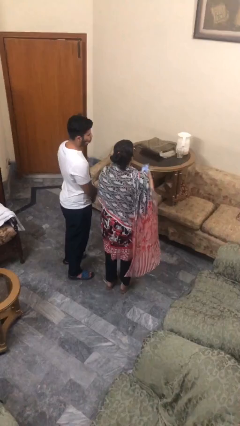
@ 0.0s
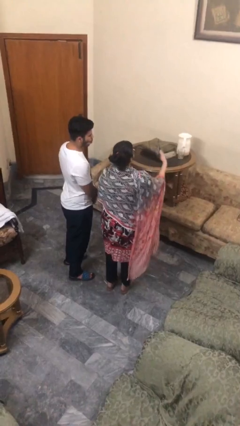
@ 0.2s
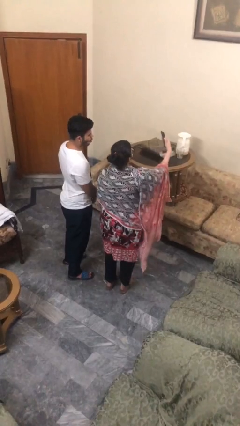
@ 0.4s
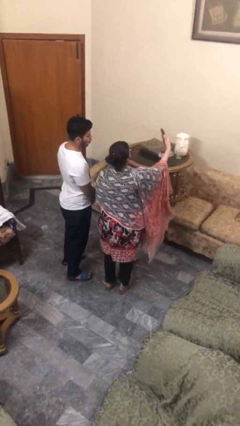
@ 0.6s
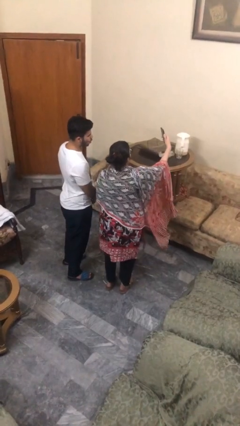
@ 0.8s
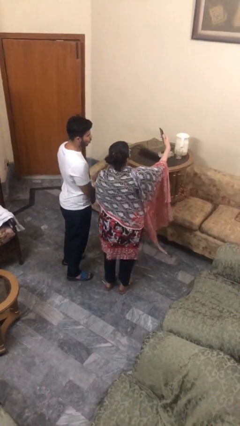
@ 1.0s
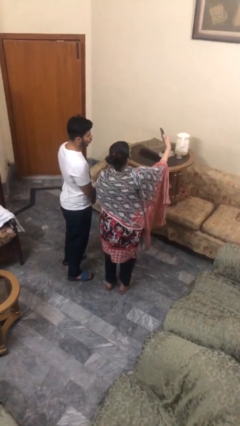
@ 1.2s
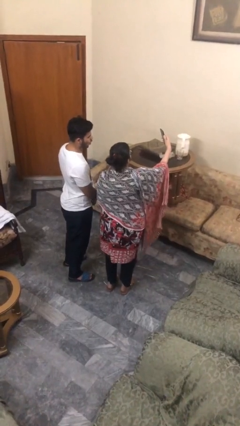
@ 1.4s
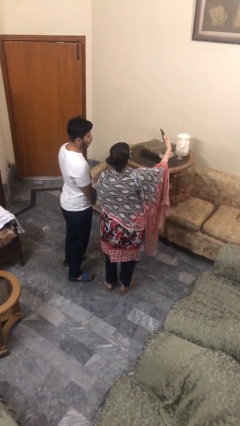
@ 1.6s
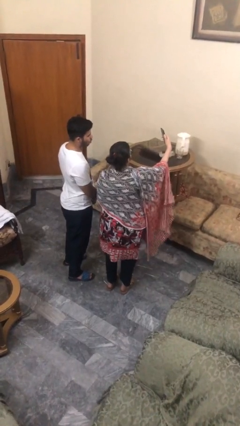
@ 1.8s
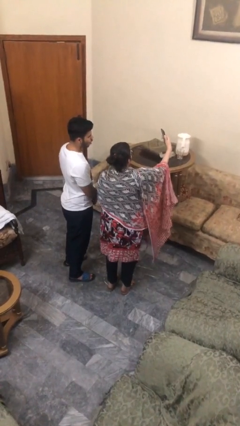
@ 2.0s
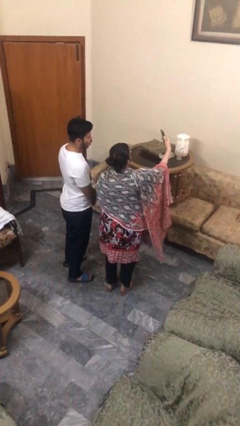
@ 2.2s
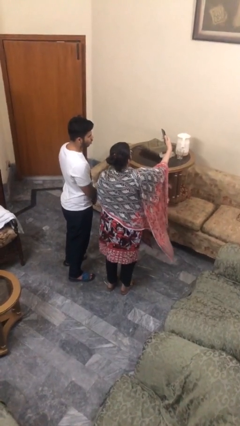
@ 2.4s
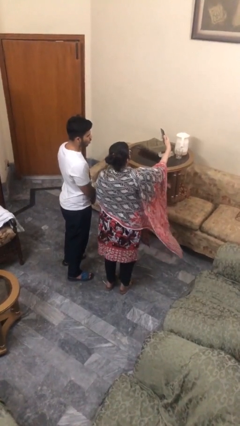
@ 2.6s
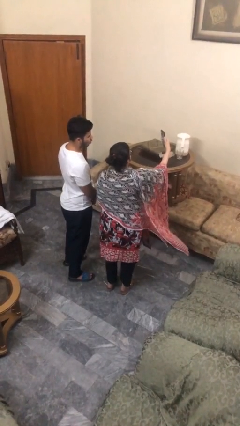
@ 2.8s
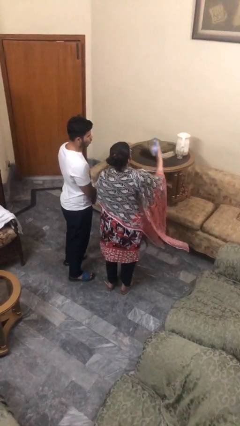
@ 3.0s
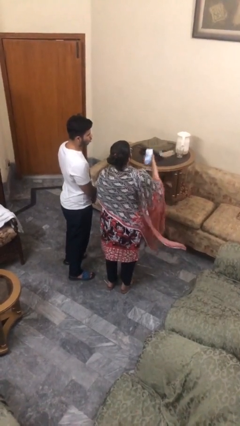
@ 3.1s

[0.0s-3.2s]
person takes selfie with person

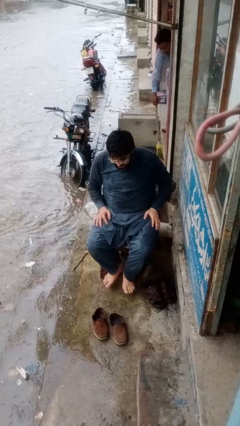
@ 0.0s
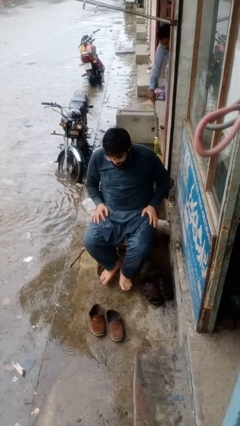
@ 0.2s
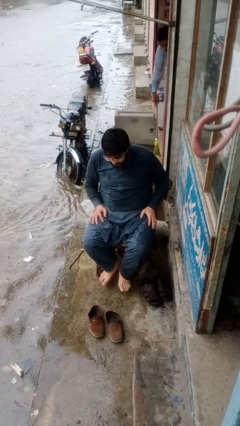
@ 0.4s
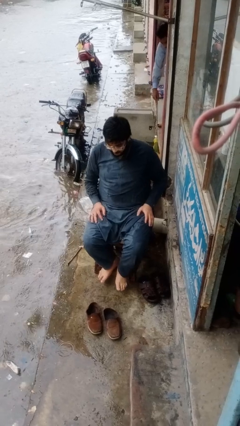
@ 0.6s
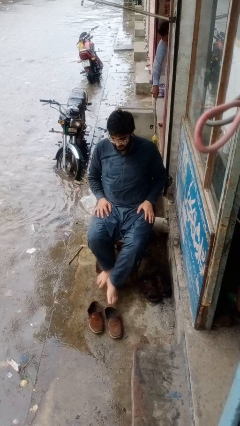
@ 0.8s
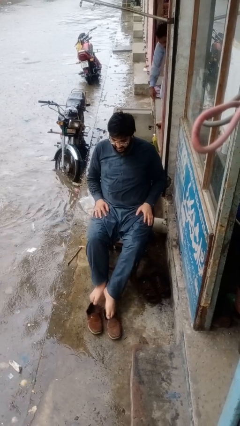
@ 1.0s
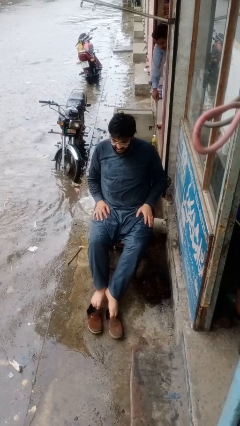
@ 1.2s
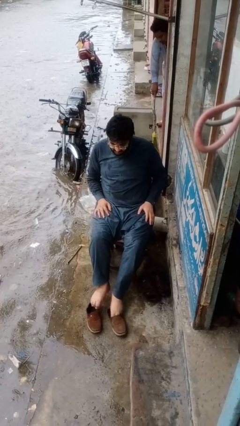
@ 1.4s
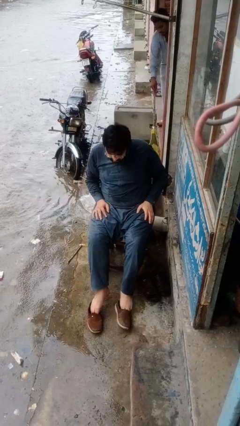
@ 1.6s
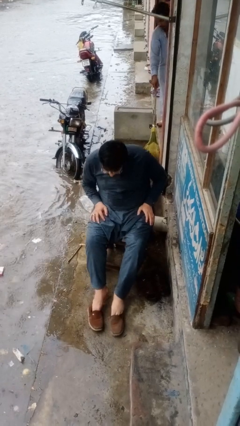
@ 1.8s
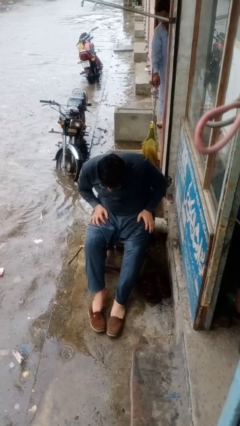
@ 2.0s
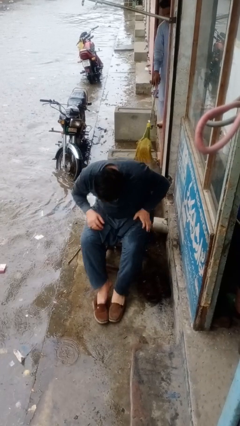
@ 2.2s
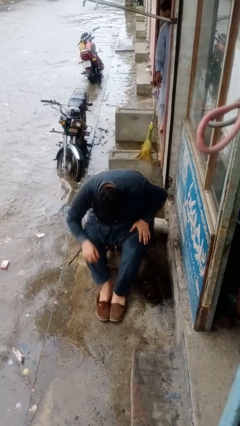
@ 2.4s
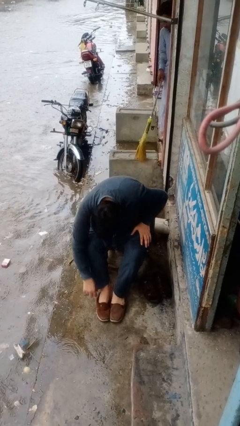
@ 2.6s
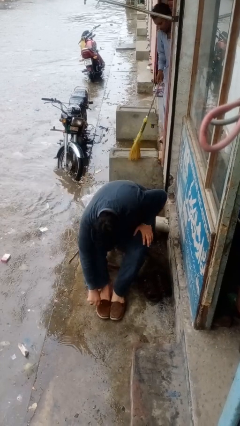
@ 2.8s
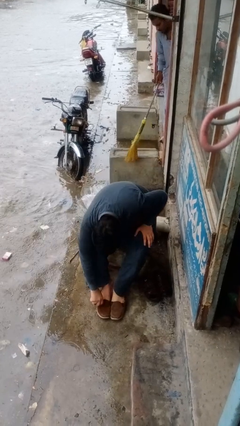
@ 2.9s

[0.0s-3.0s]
person puts on shoes

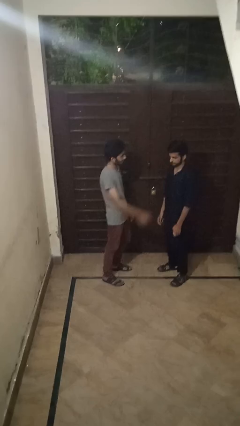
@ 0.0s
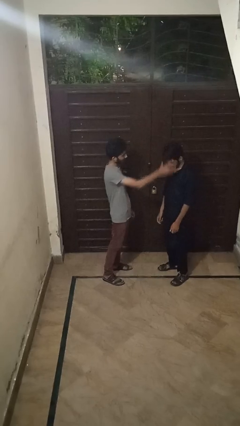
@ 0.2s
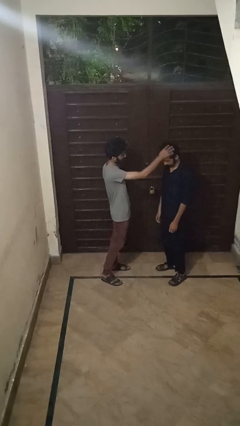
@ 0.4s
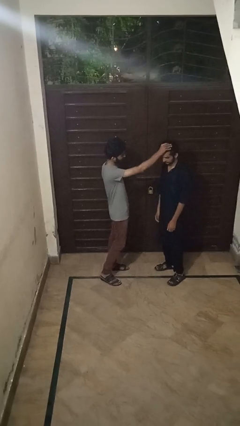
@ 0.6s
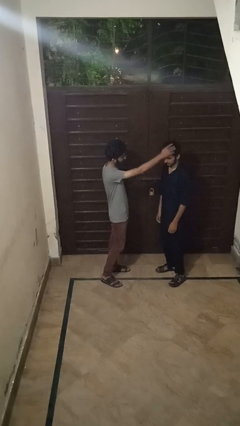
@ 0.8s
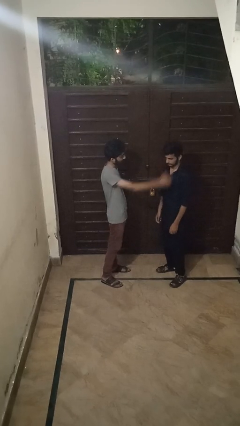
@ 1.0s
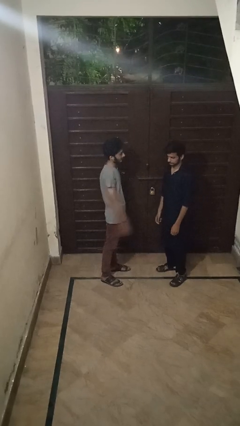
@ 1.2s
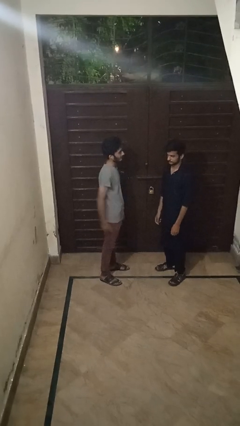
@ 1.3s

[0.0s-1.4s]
person grabs person by hair

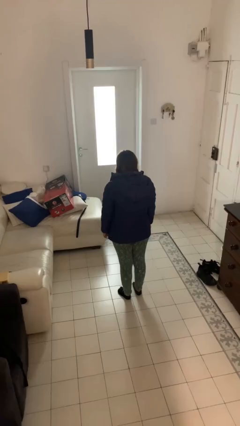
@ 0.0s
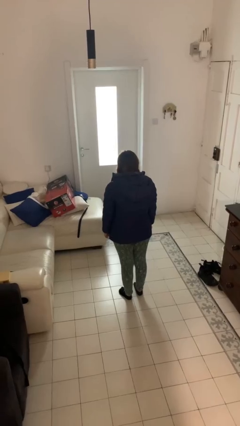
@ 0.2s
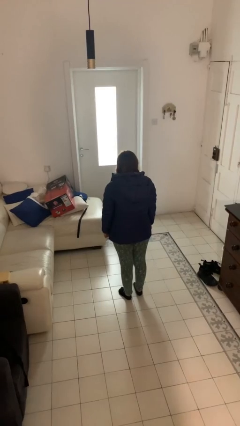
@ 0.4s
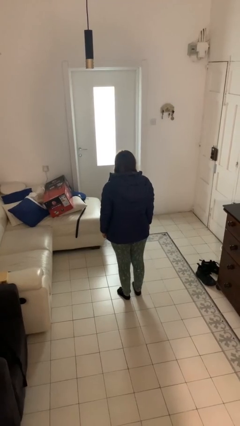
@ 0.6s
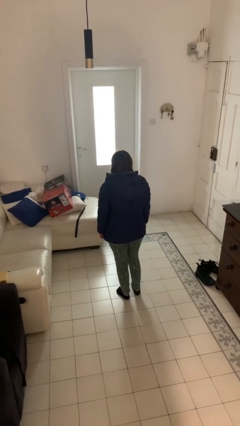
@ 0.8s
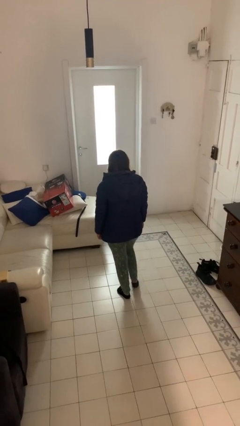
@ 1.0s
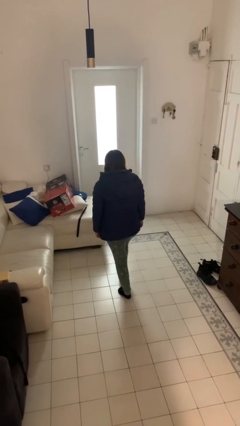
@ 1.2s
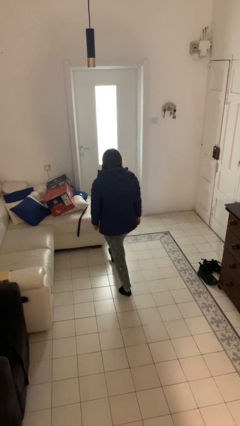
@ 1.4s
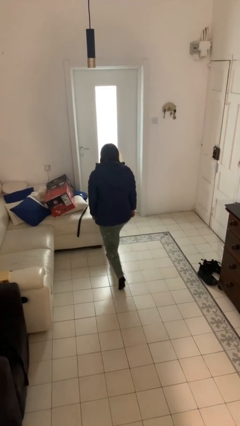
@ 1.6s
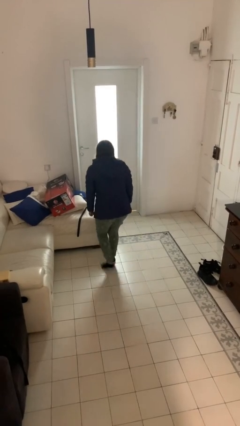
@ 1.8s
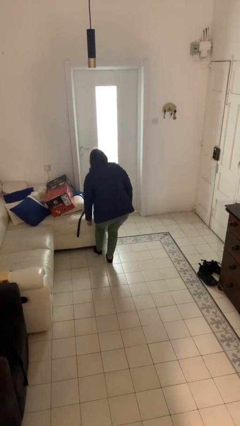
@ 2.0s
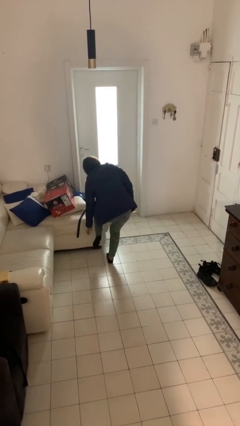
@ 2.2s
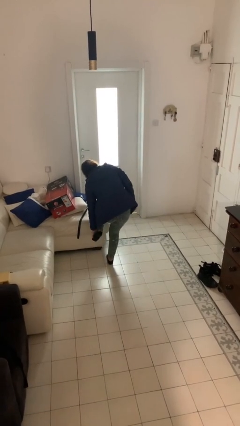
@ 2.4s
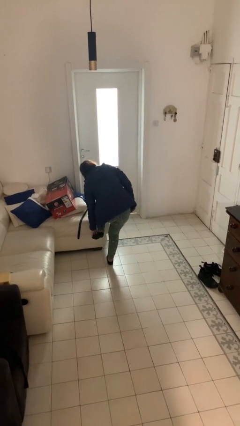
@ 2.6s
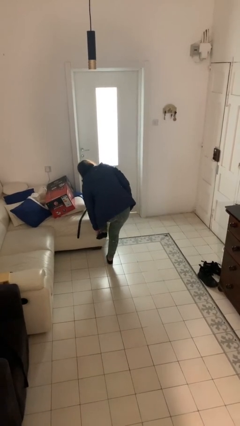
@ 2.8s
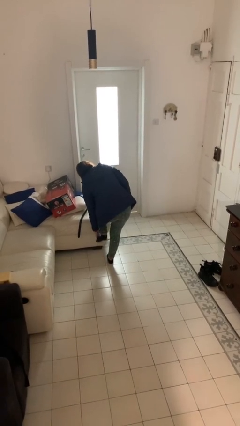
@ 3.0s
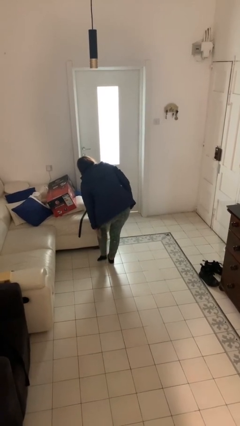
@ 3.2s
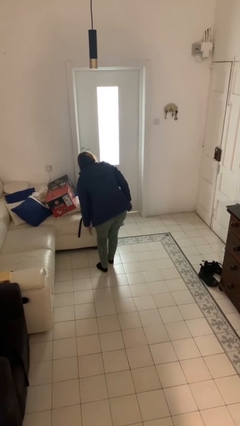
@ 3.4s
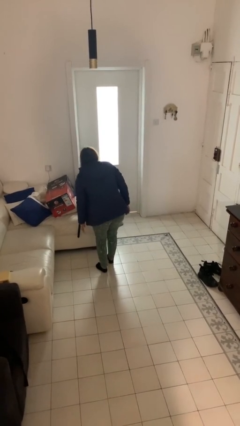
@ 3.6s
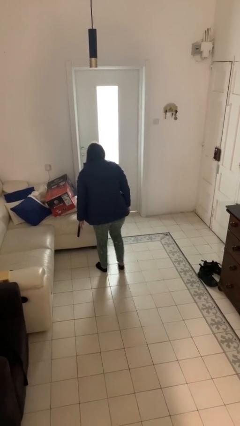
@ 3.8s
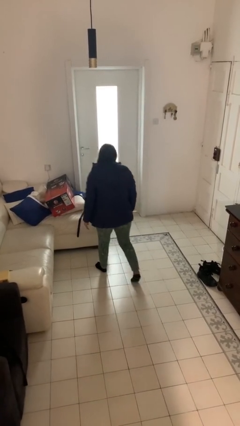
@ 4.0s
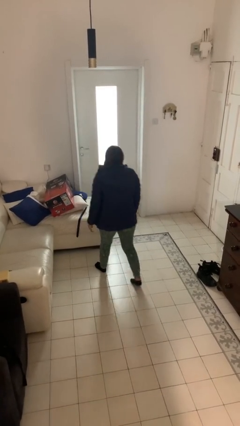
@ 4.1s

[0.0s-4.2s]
person stubs toe

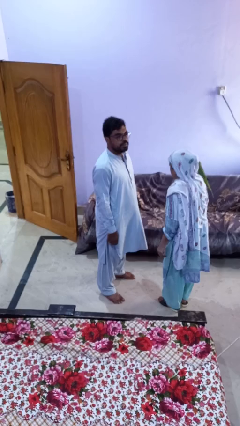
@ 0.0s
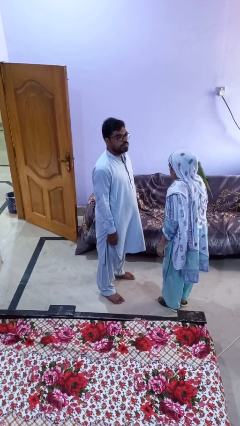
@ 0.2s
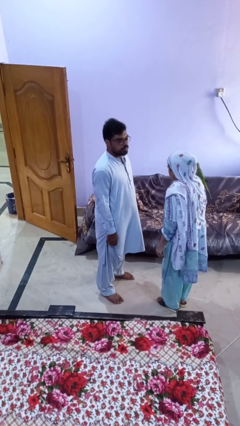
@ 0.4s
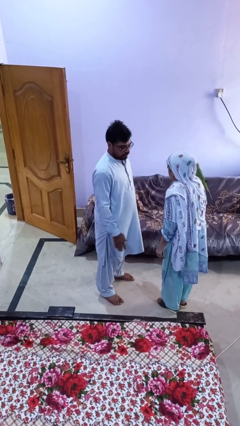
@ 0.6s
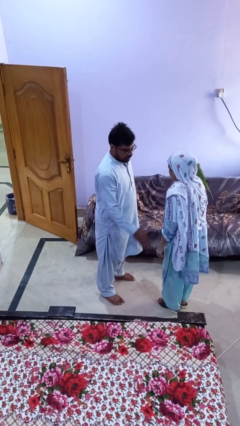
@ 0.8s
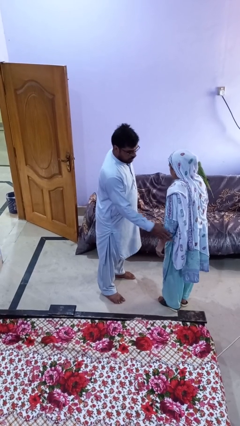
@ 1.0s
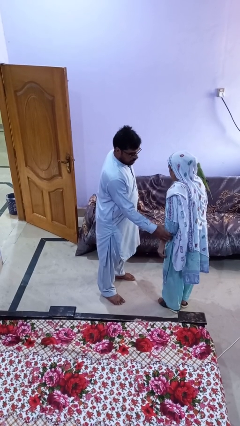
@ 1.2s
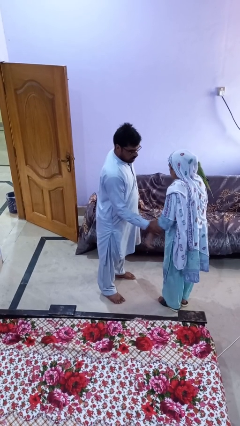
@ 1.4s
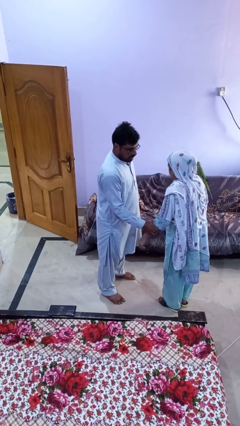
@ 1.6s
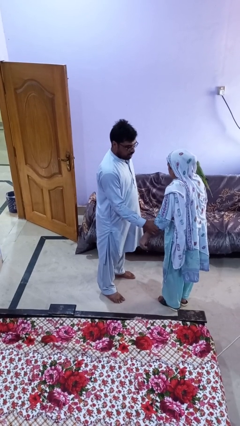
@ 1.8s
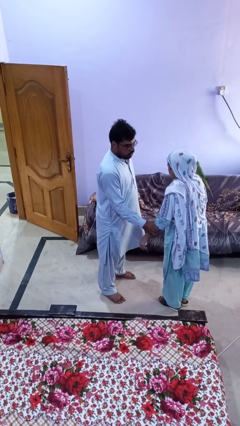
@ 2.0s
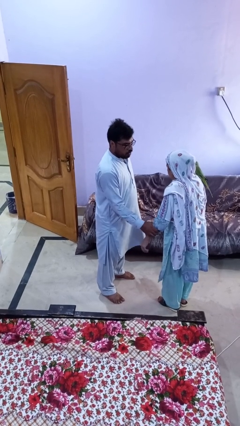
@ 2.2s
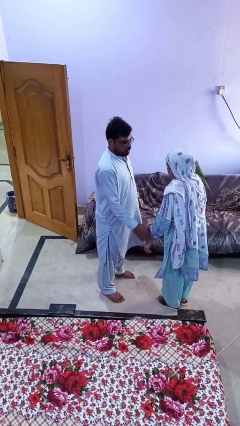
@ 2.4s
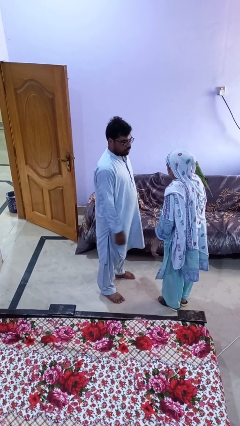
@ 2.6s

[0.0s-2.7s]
person grabs person by forearm

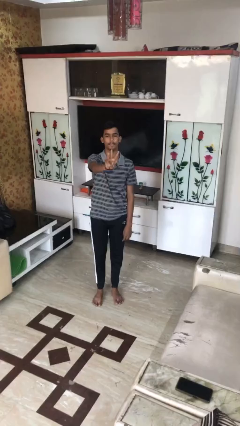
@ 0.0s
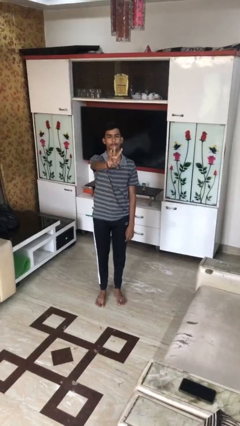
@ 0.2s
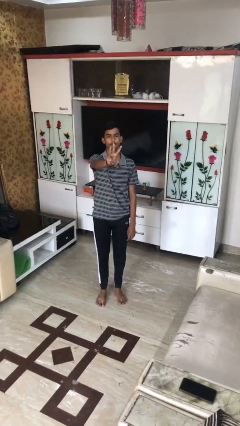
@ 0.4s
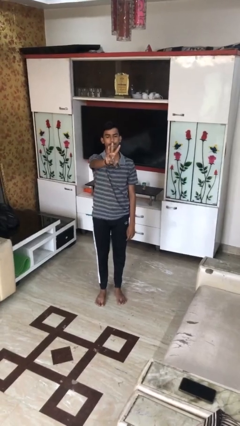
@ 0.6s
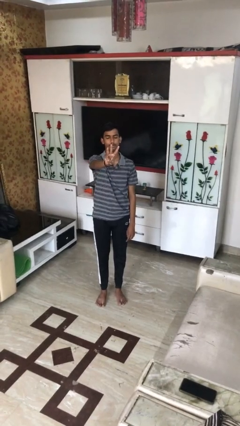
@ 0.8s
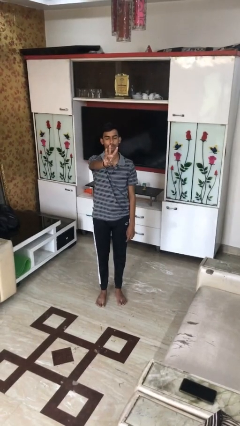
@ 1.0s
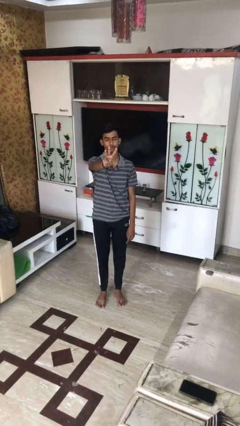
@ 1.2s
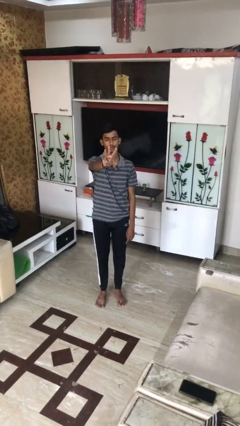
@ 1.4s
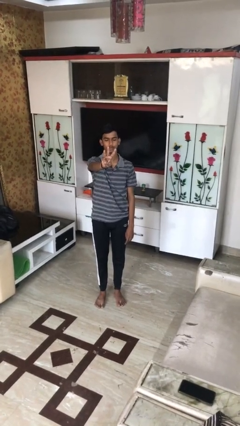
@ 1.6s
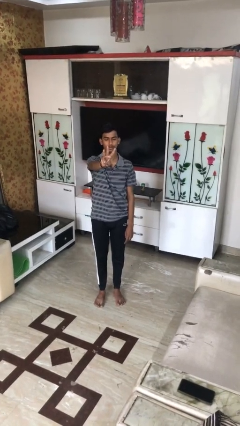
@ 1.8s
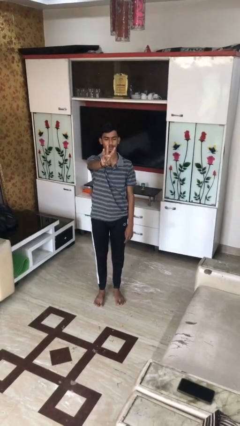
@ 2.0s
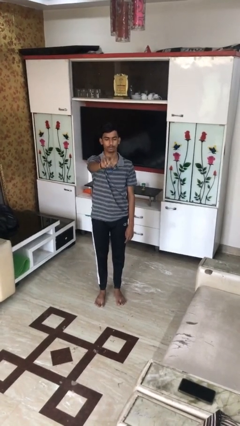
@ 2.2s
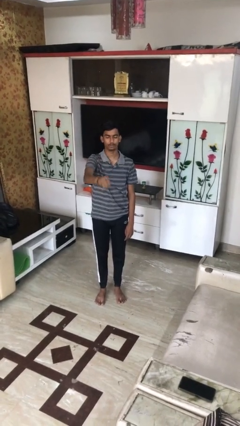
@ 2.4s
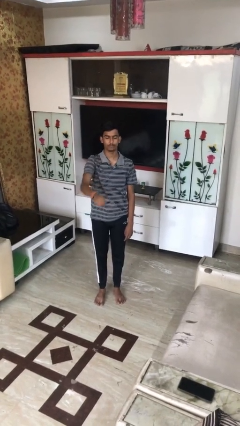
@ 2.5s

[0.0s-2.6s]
person gestures number three

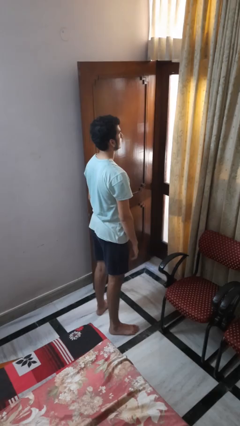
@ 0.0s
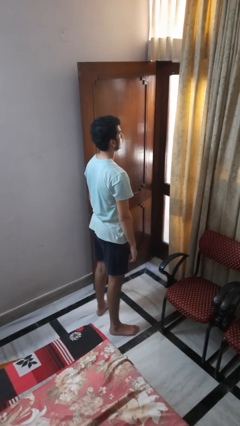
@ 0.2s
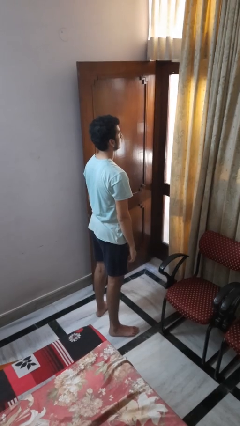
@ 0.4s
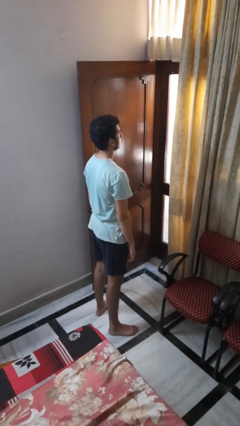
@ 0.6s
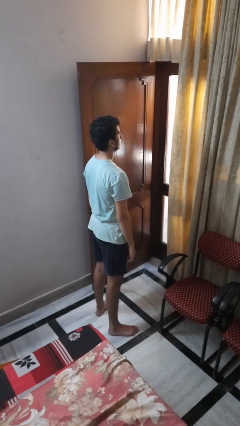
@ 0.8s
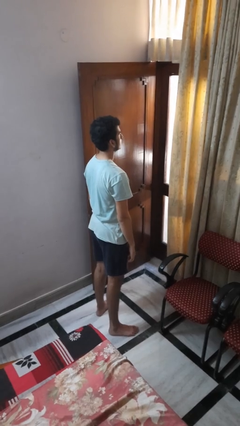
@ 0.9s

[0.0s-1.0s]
person takes off ring
